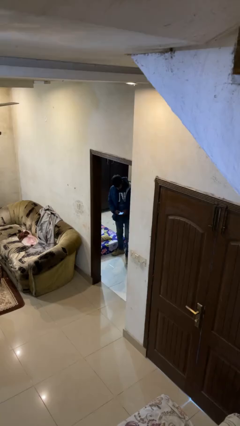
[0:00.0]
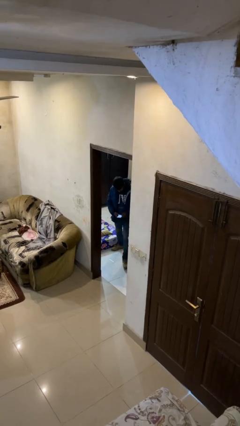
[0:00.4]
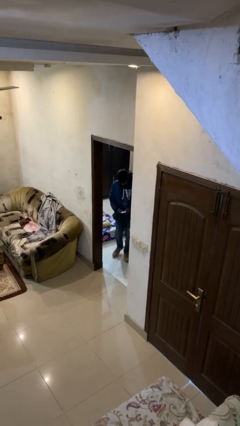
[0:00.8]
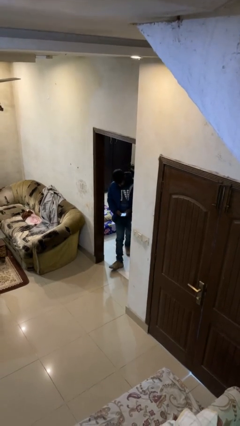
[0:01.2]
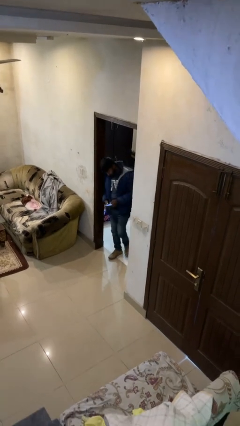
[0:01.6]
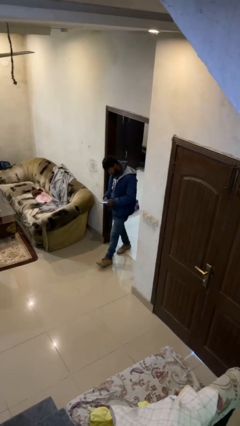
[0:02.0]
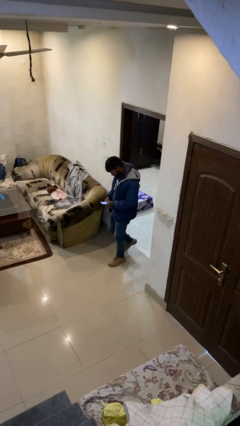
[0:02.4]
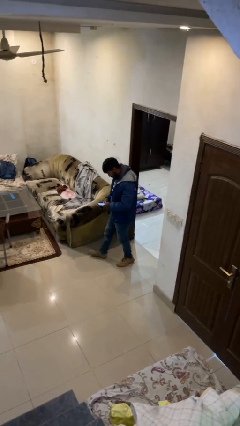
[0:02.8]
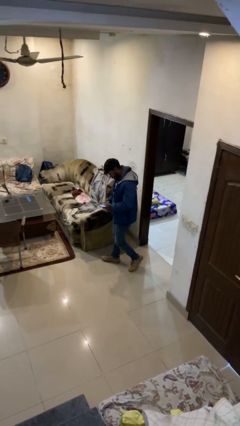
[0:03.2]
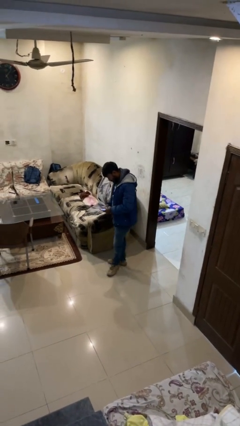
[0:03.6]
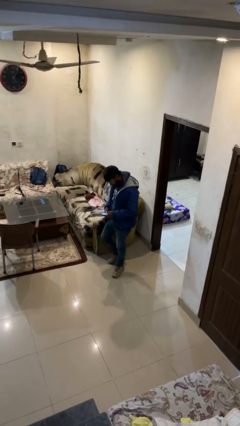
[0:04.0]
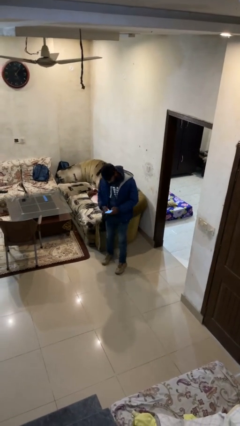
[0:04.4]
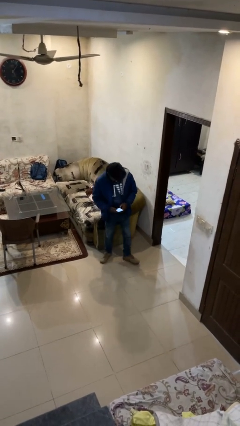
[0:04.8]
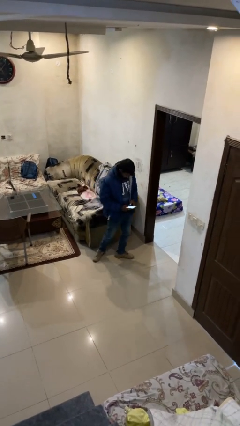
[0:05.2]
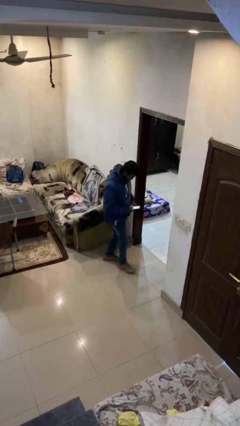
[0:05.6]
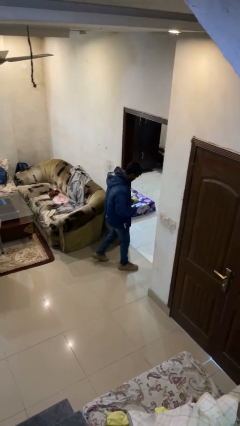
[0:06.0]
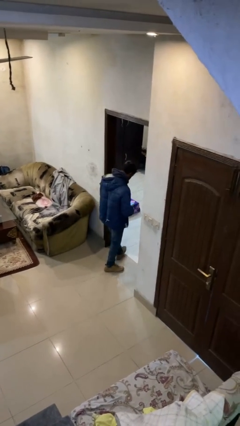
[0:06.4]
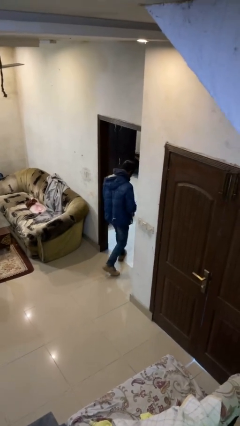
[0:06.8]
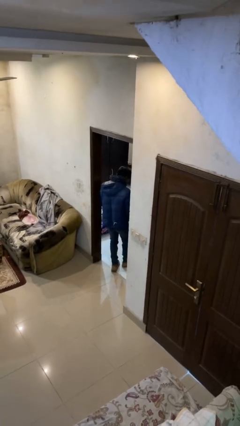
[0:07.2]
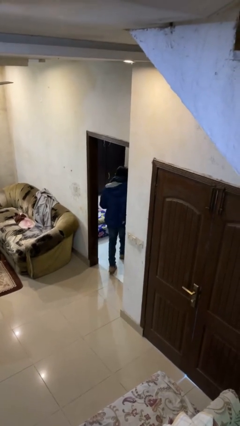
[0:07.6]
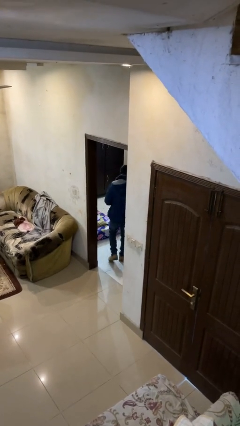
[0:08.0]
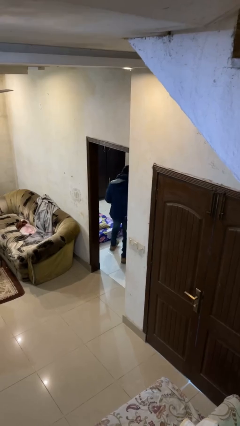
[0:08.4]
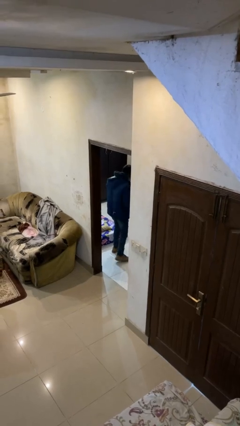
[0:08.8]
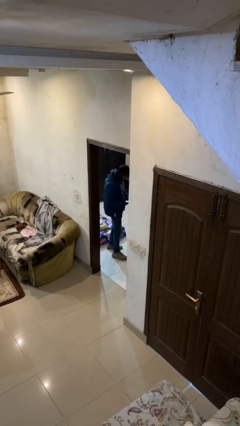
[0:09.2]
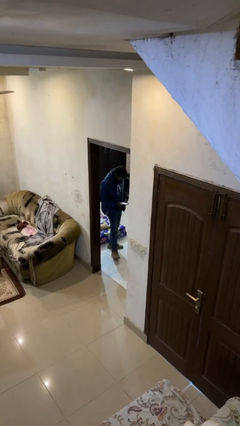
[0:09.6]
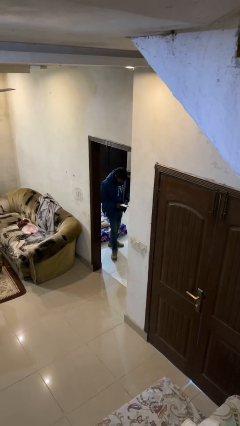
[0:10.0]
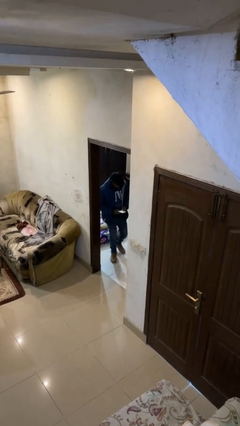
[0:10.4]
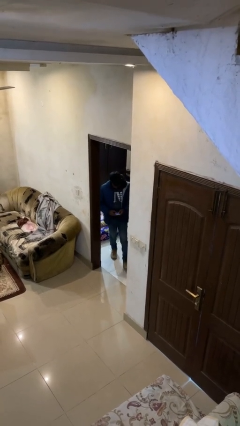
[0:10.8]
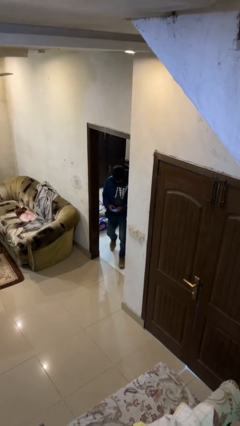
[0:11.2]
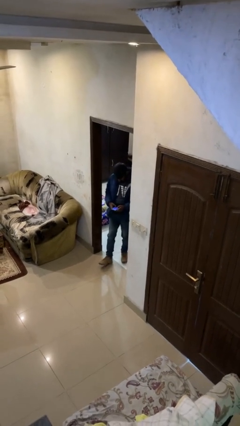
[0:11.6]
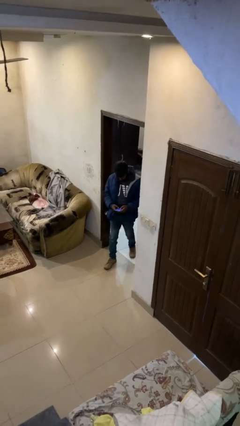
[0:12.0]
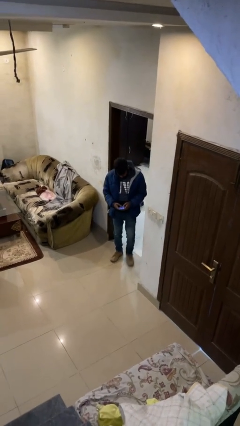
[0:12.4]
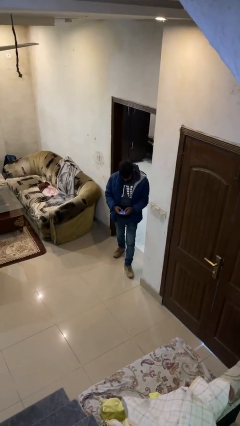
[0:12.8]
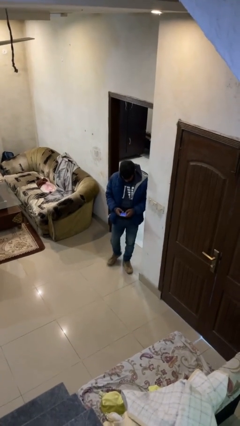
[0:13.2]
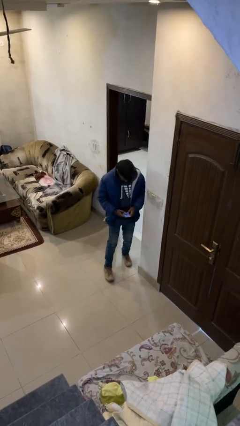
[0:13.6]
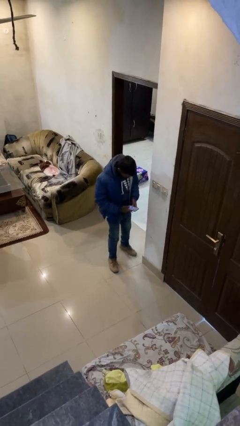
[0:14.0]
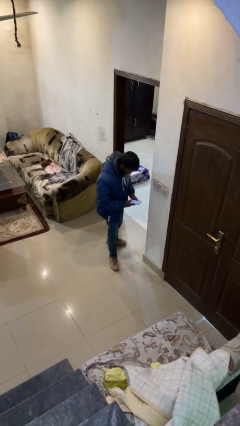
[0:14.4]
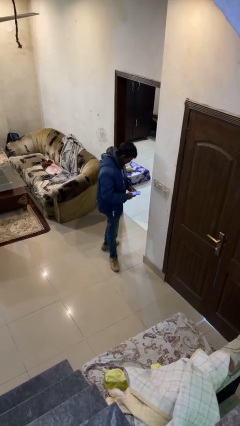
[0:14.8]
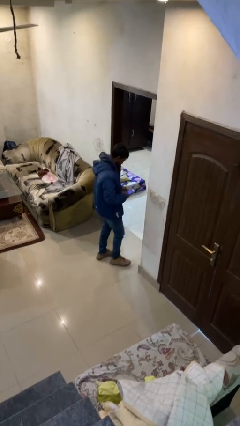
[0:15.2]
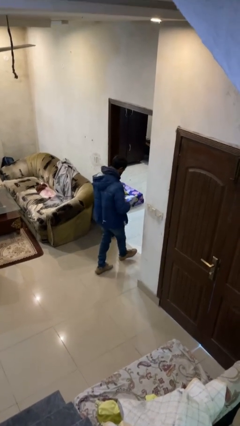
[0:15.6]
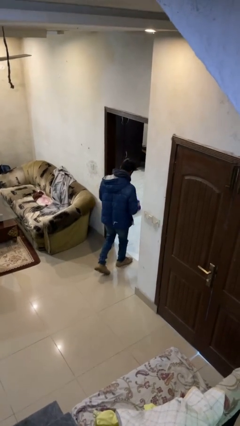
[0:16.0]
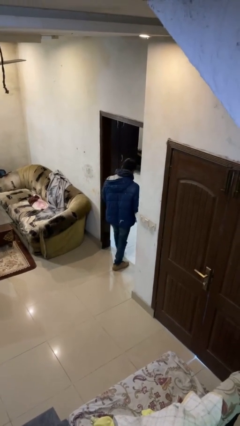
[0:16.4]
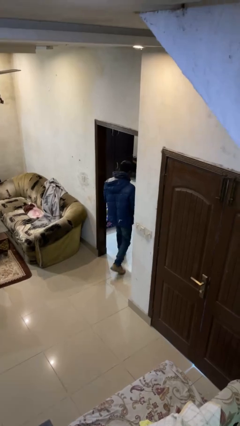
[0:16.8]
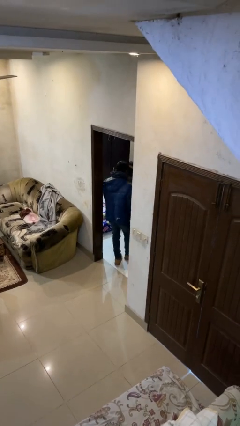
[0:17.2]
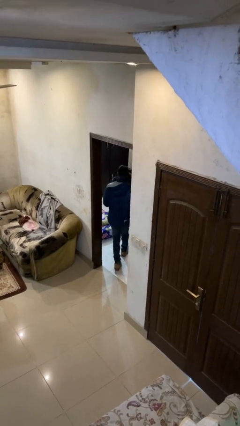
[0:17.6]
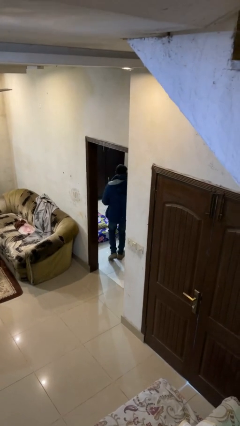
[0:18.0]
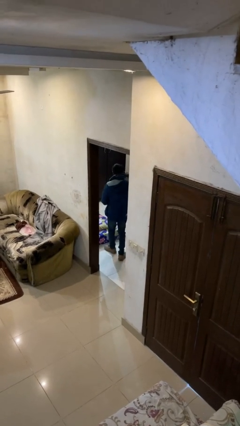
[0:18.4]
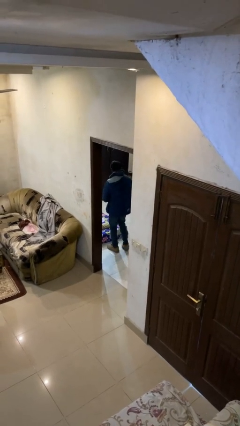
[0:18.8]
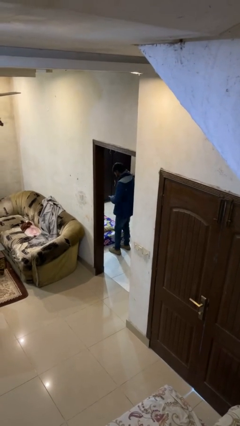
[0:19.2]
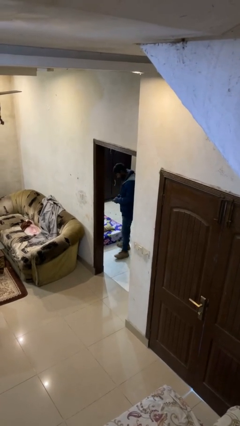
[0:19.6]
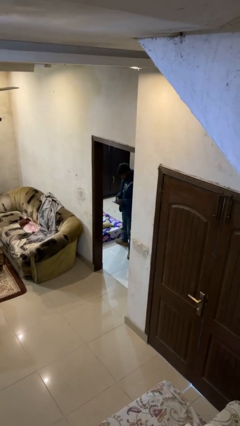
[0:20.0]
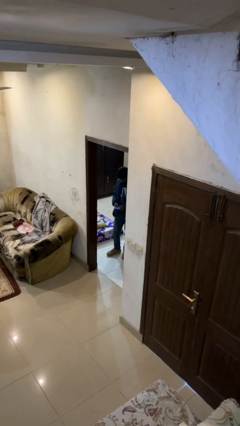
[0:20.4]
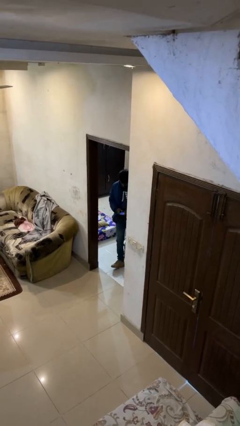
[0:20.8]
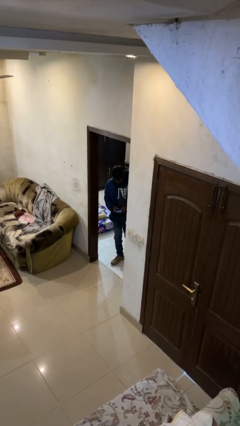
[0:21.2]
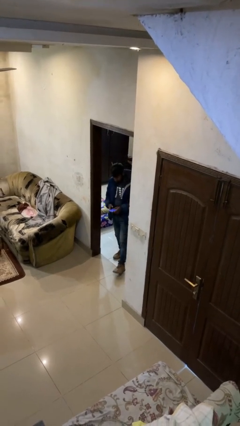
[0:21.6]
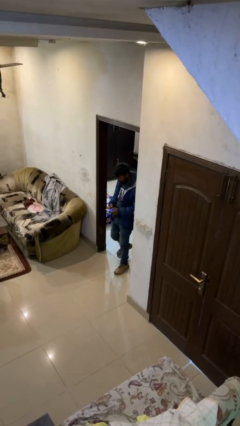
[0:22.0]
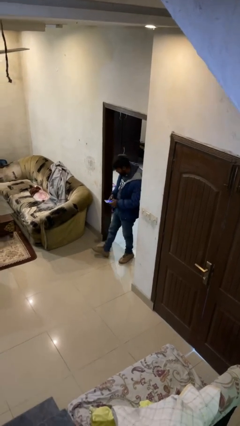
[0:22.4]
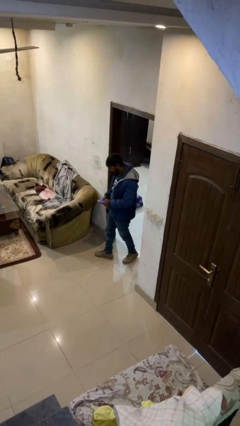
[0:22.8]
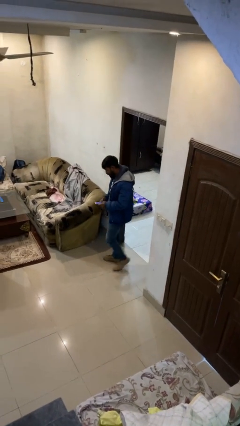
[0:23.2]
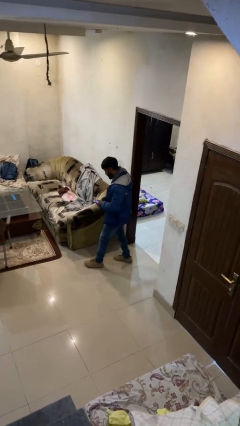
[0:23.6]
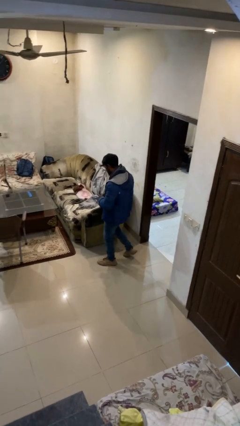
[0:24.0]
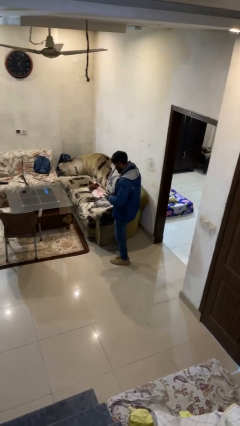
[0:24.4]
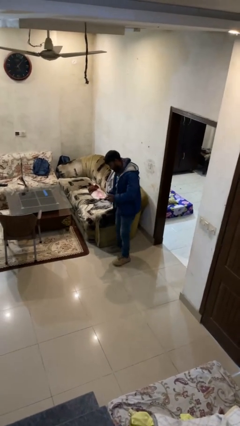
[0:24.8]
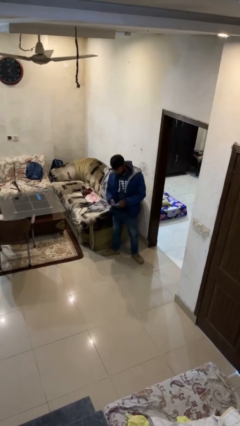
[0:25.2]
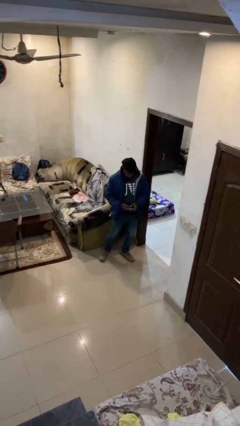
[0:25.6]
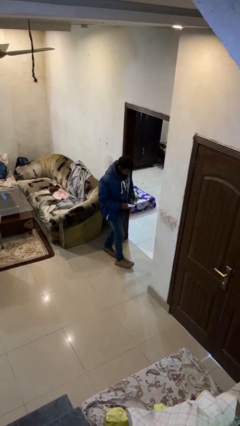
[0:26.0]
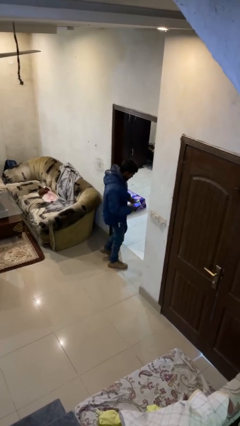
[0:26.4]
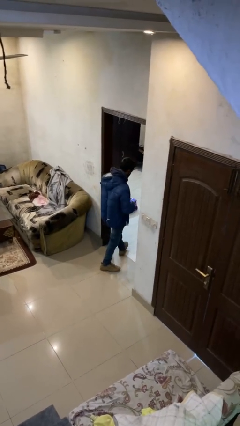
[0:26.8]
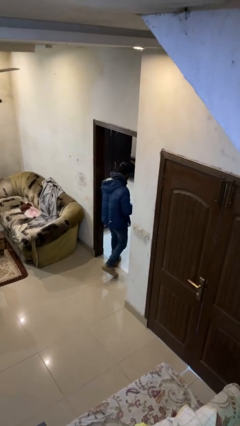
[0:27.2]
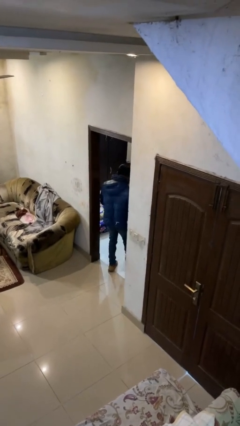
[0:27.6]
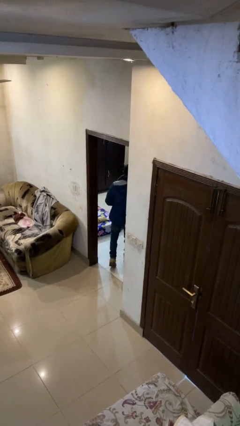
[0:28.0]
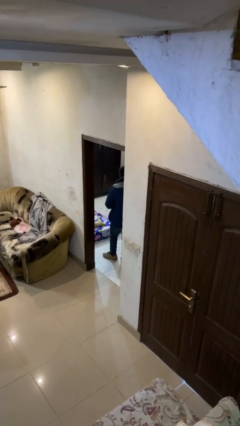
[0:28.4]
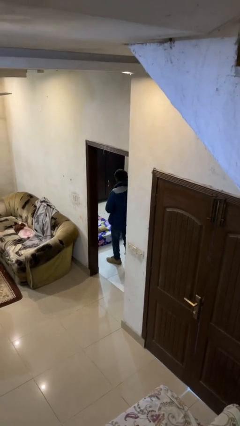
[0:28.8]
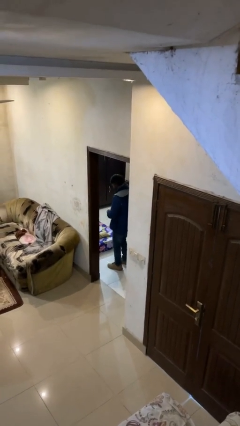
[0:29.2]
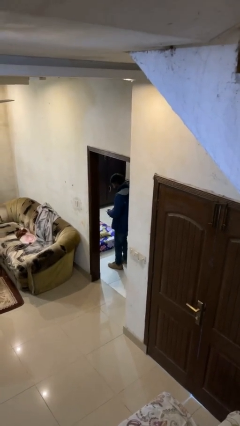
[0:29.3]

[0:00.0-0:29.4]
person texts on phone

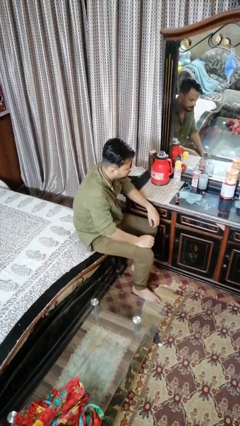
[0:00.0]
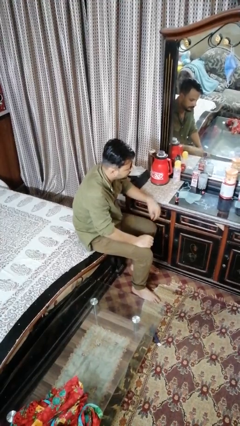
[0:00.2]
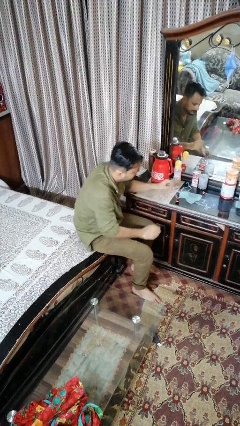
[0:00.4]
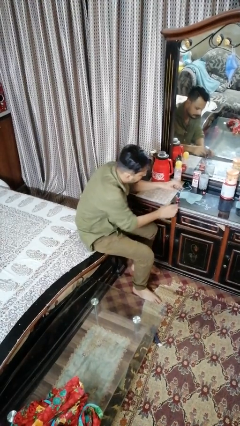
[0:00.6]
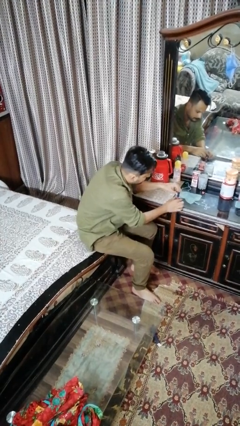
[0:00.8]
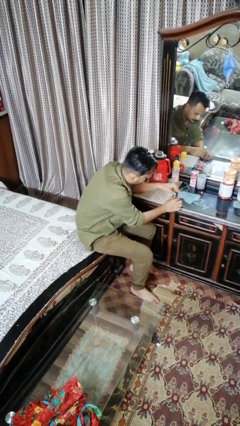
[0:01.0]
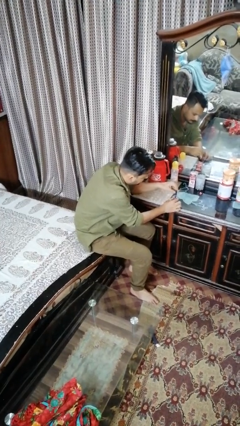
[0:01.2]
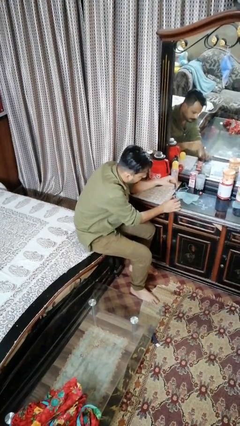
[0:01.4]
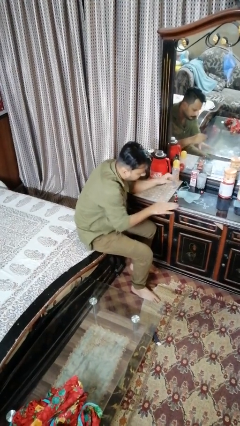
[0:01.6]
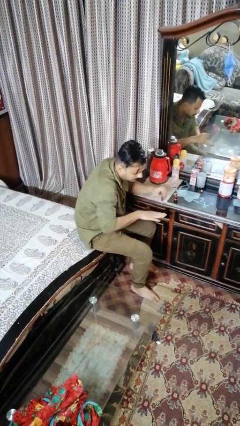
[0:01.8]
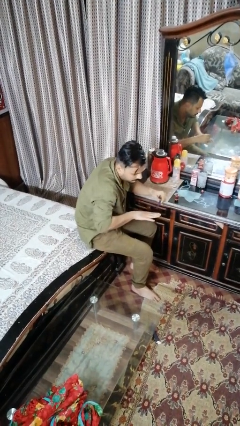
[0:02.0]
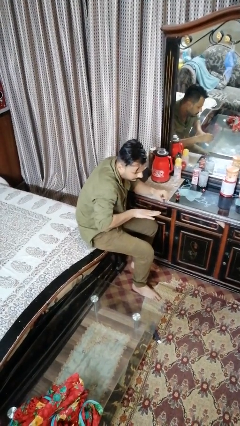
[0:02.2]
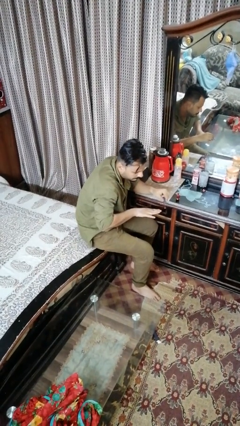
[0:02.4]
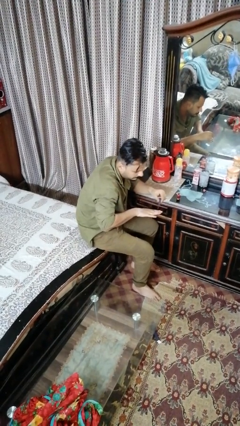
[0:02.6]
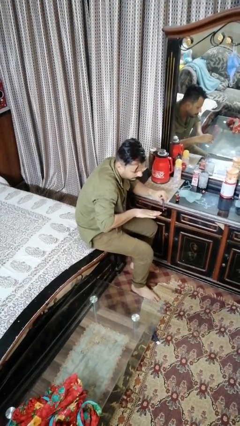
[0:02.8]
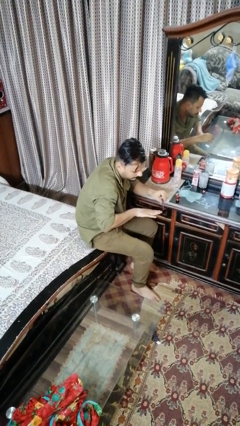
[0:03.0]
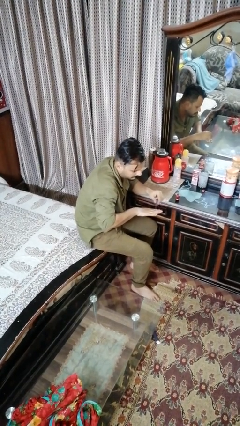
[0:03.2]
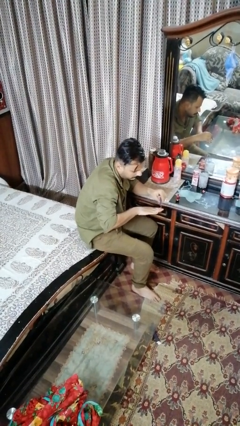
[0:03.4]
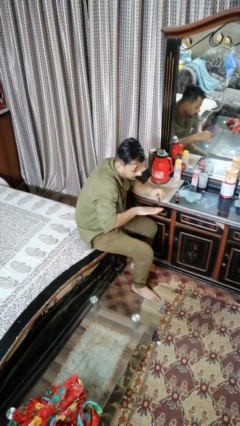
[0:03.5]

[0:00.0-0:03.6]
person paints fingernails
